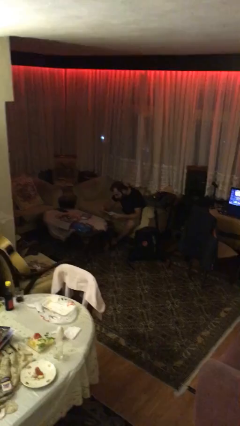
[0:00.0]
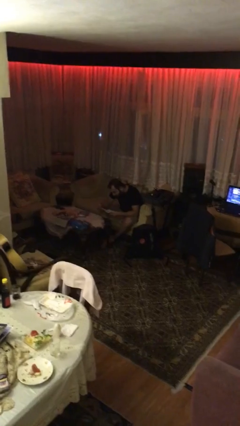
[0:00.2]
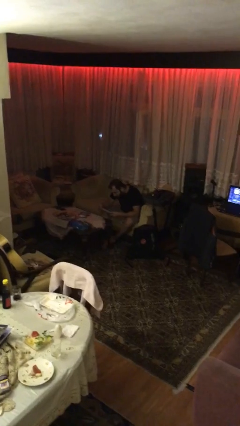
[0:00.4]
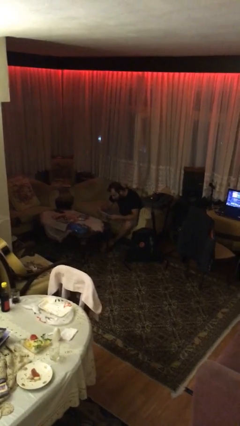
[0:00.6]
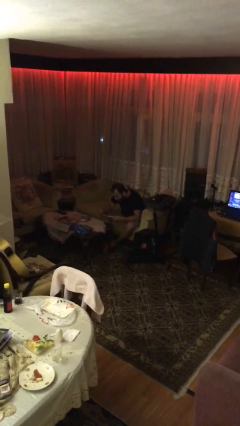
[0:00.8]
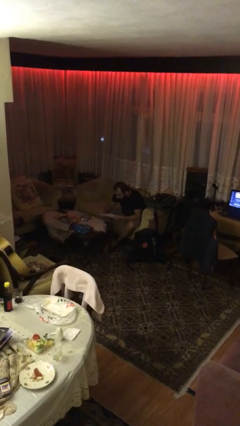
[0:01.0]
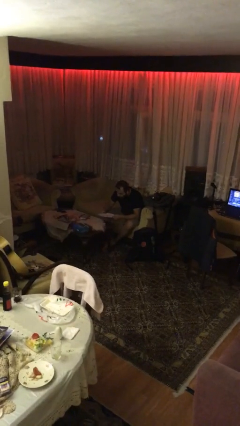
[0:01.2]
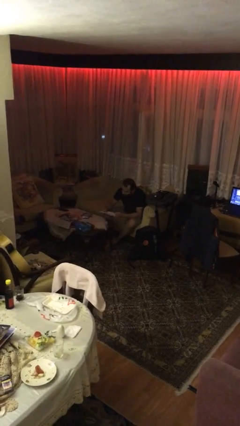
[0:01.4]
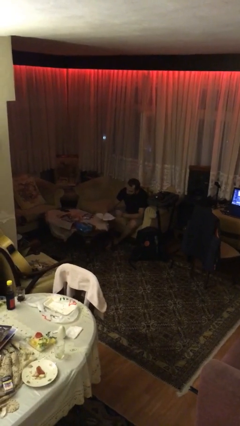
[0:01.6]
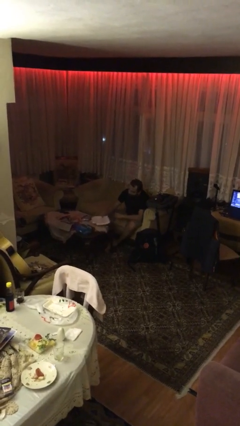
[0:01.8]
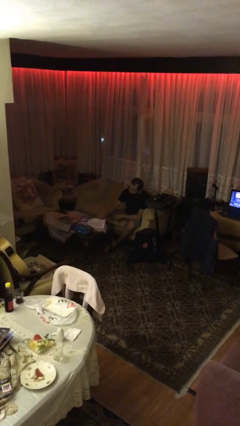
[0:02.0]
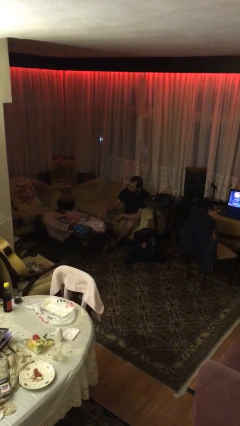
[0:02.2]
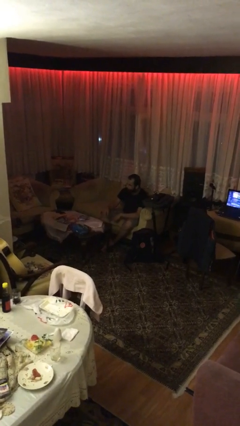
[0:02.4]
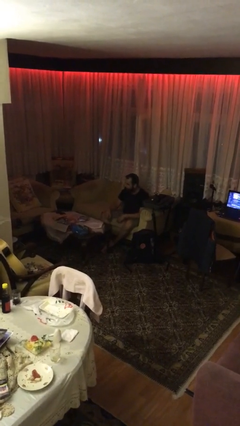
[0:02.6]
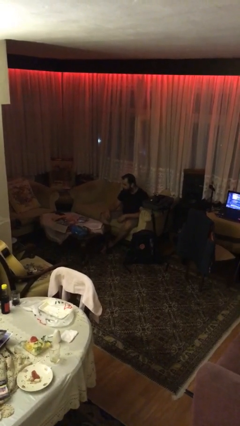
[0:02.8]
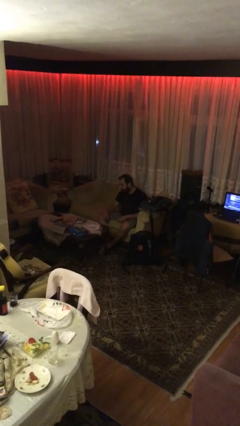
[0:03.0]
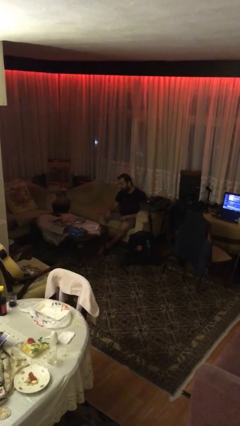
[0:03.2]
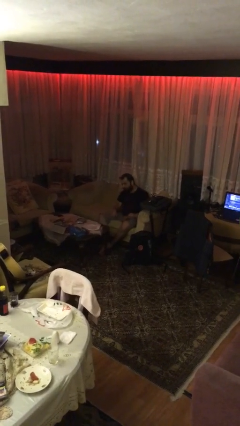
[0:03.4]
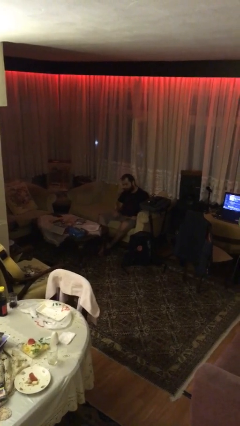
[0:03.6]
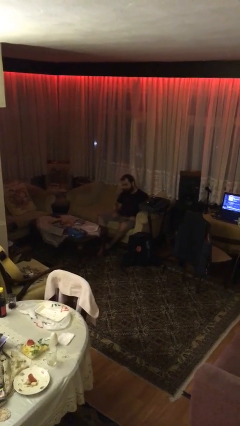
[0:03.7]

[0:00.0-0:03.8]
person puts down object on table

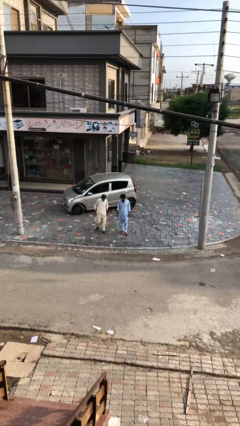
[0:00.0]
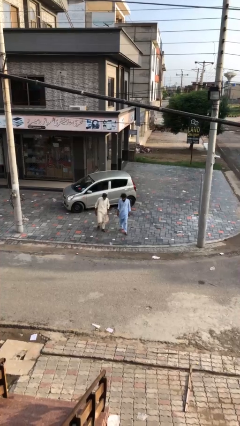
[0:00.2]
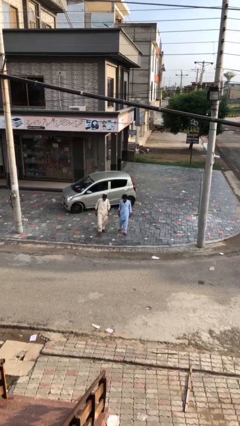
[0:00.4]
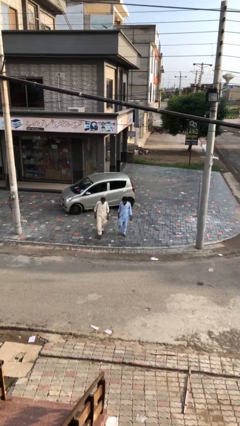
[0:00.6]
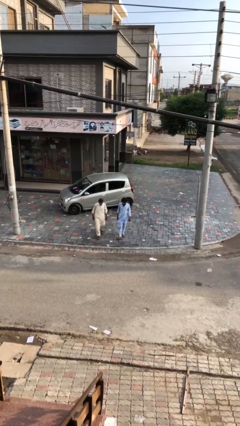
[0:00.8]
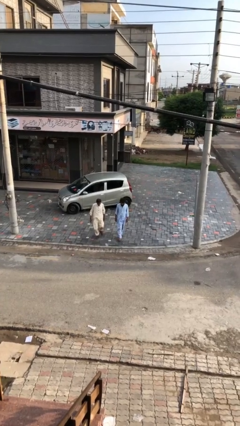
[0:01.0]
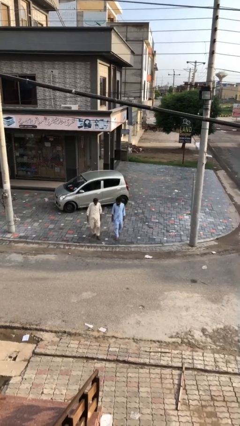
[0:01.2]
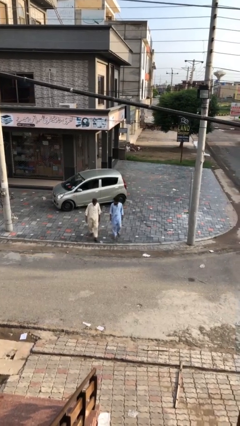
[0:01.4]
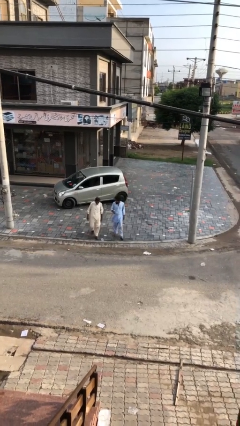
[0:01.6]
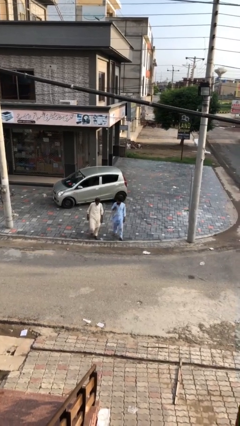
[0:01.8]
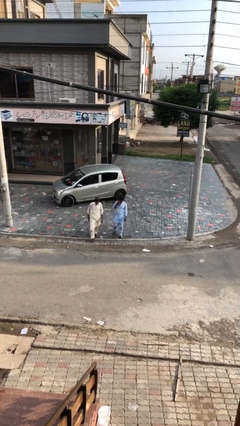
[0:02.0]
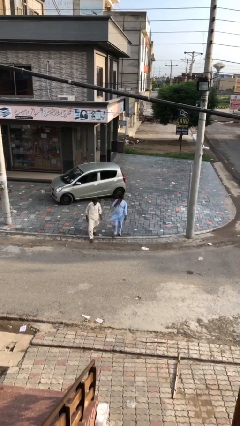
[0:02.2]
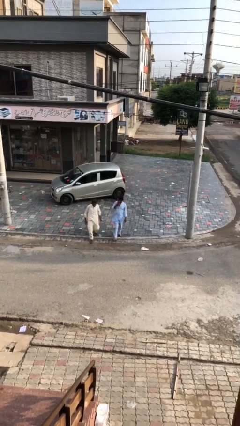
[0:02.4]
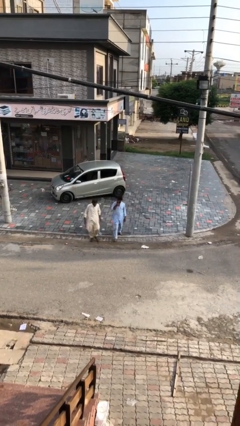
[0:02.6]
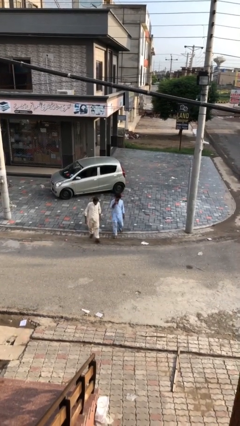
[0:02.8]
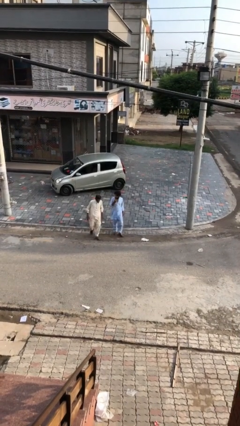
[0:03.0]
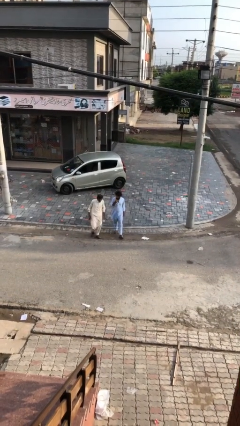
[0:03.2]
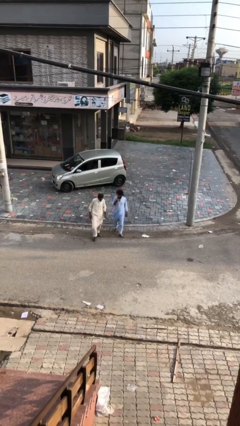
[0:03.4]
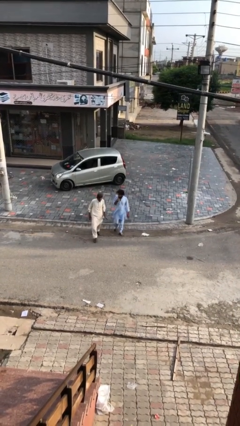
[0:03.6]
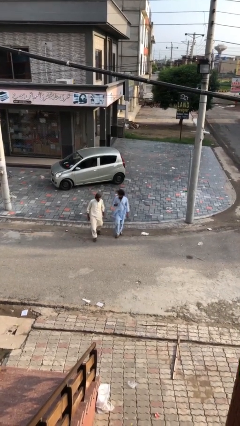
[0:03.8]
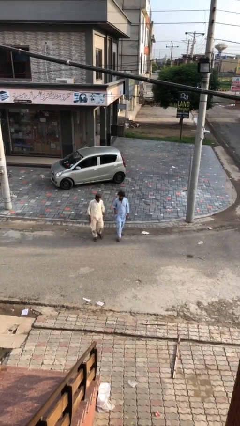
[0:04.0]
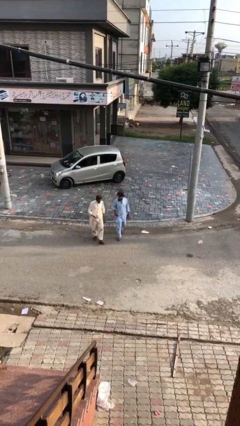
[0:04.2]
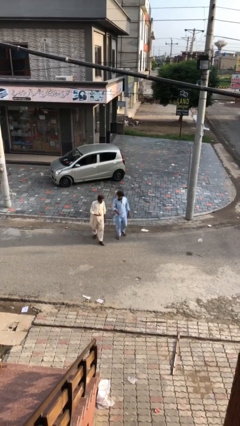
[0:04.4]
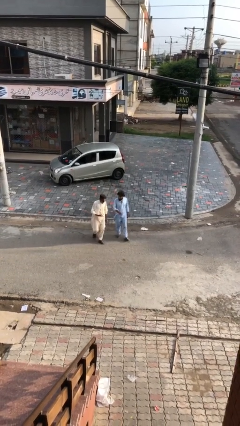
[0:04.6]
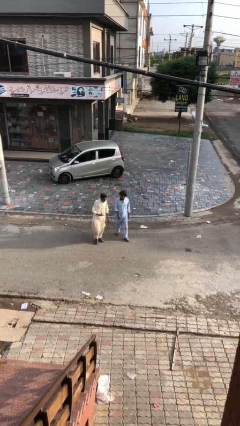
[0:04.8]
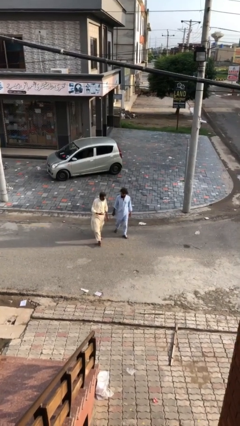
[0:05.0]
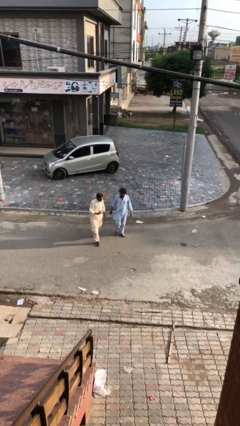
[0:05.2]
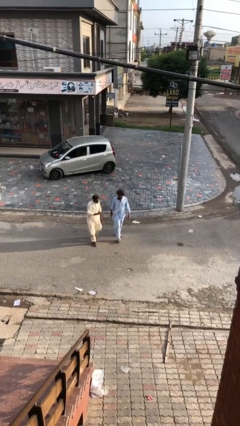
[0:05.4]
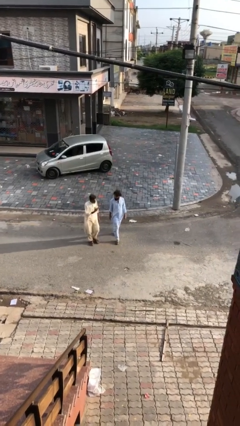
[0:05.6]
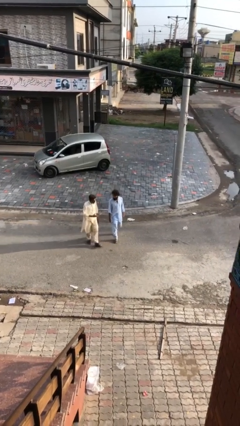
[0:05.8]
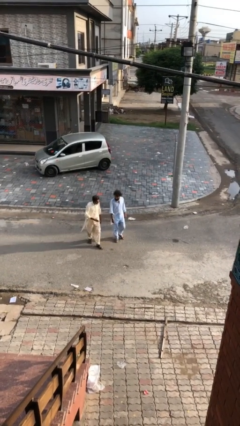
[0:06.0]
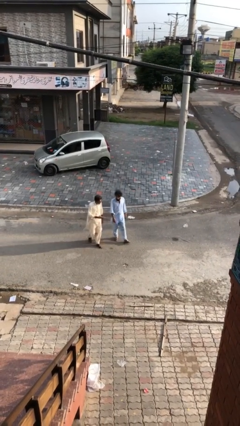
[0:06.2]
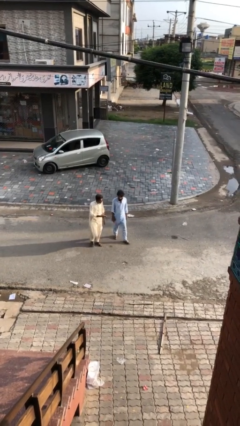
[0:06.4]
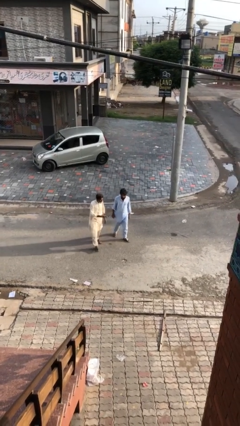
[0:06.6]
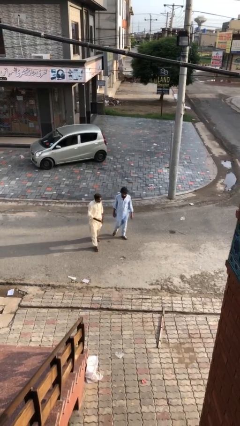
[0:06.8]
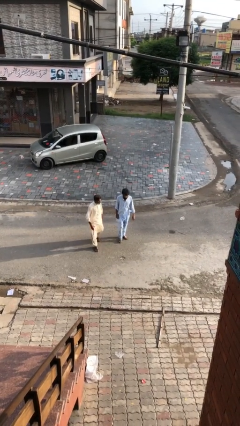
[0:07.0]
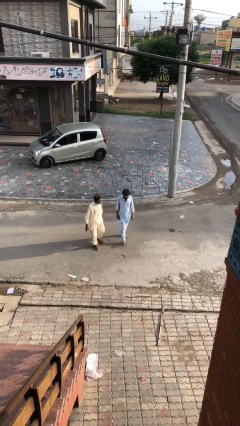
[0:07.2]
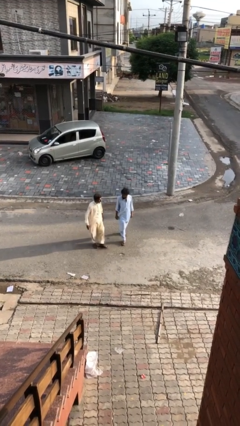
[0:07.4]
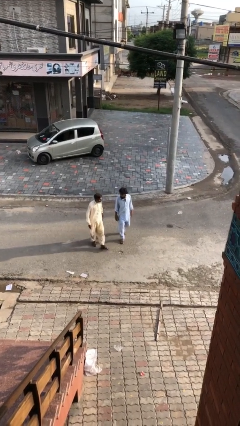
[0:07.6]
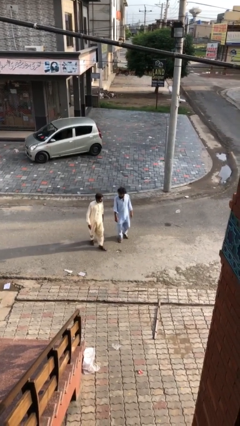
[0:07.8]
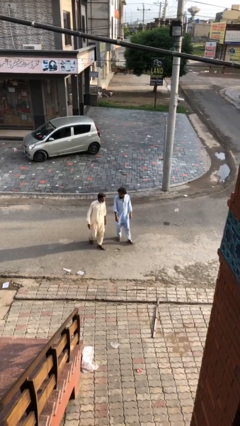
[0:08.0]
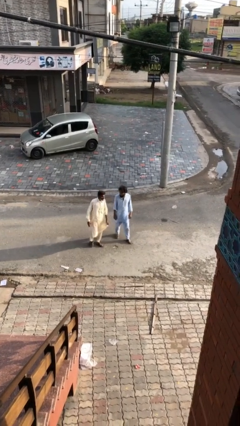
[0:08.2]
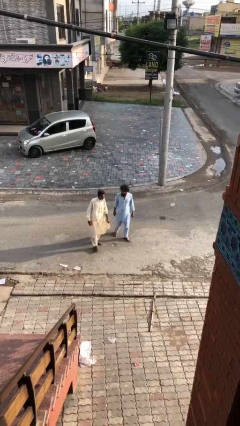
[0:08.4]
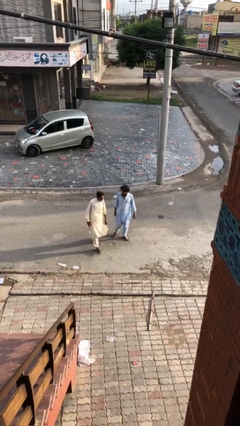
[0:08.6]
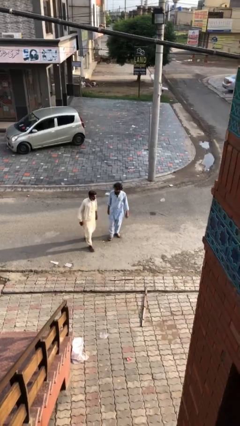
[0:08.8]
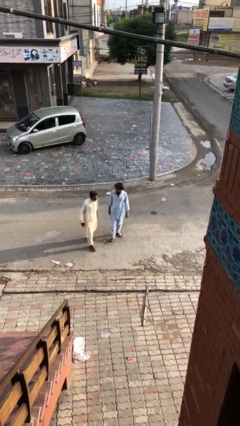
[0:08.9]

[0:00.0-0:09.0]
person talks to person

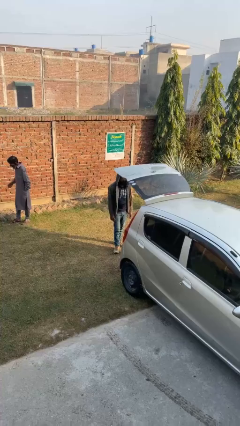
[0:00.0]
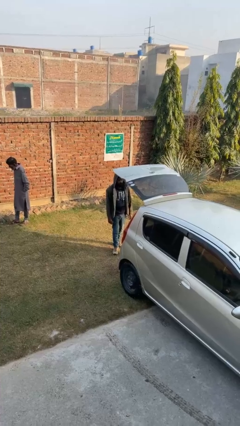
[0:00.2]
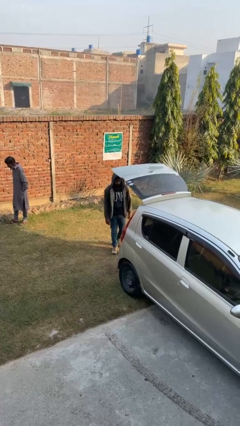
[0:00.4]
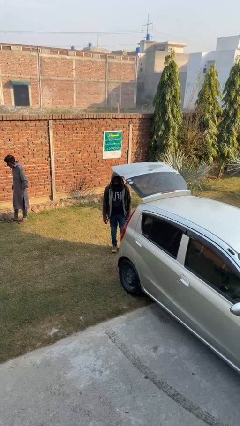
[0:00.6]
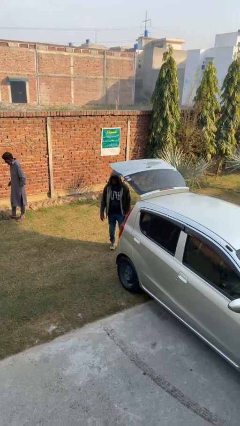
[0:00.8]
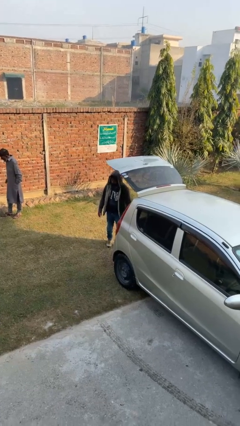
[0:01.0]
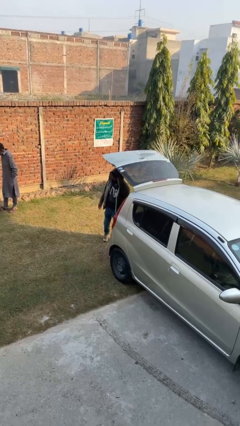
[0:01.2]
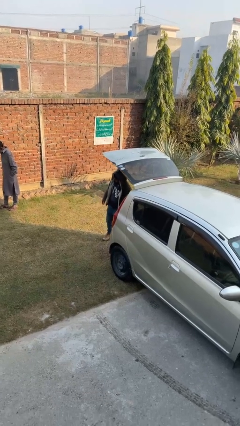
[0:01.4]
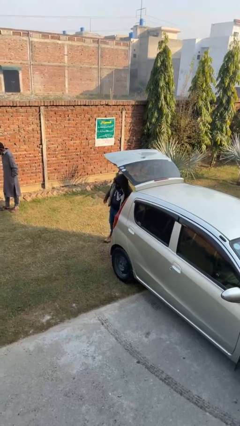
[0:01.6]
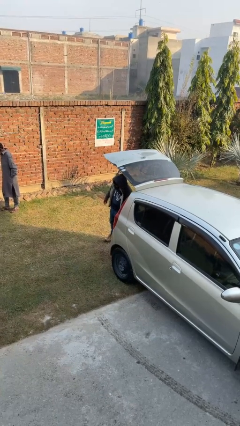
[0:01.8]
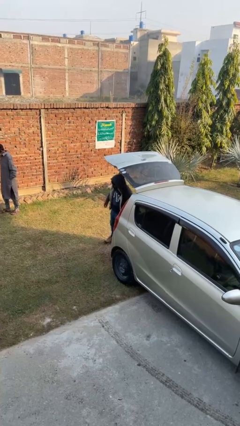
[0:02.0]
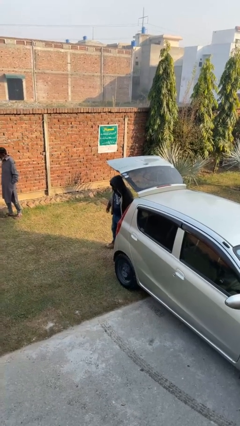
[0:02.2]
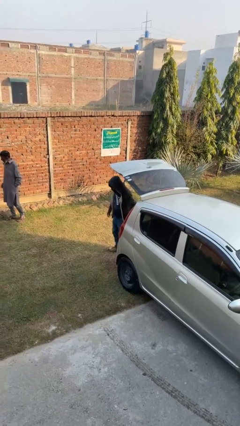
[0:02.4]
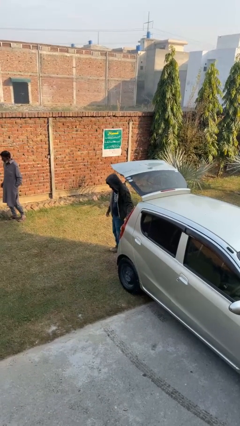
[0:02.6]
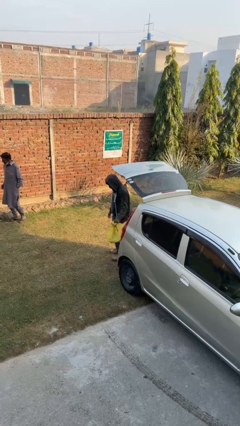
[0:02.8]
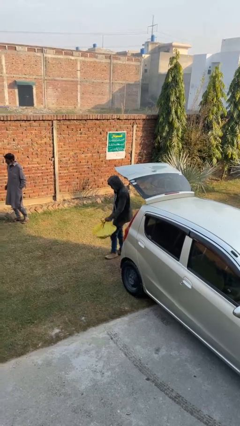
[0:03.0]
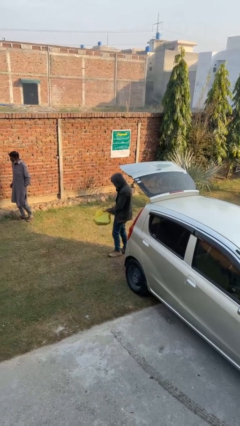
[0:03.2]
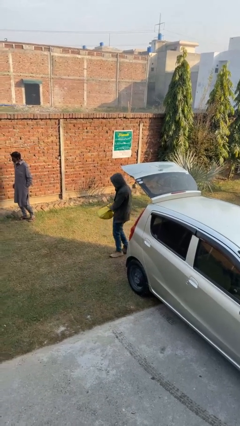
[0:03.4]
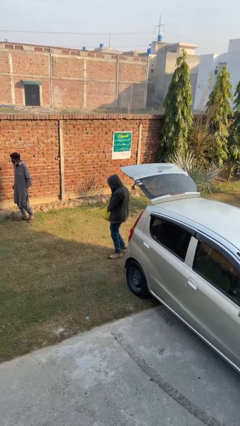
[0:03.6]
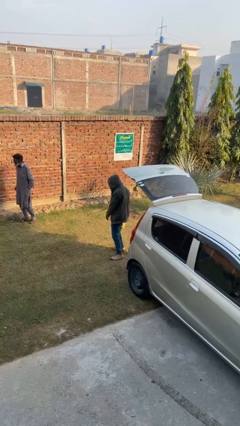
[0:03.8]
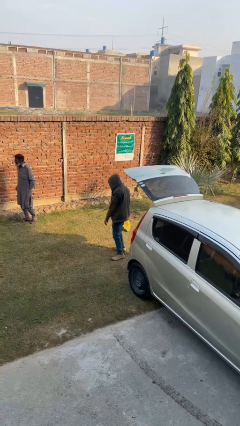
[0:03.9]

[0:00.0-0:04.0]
person unloads car

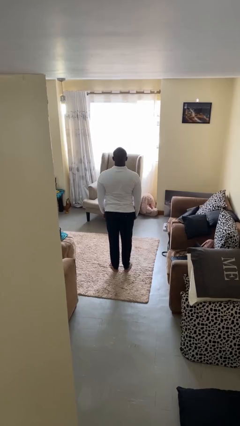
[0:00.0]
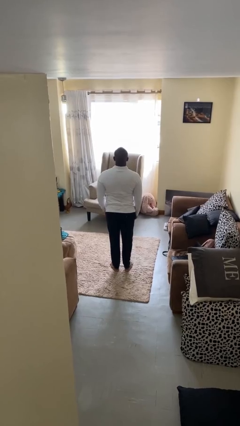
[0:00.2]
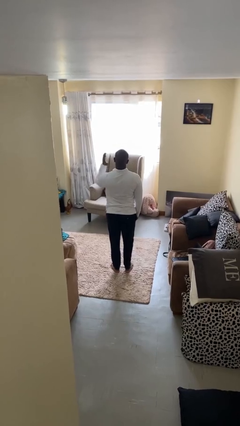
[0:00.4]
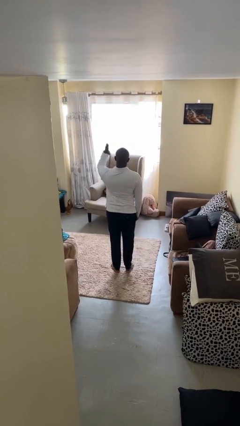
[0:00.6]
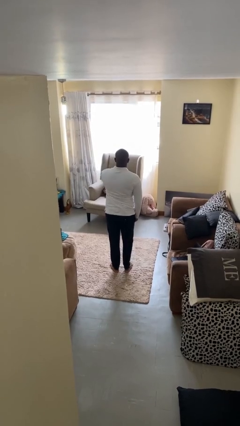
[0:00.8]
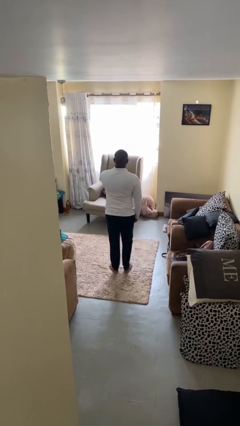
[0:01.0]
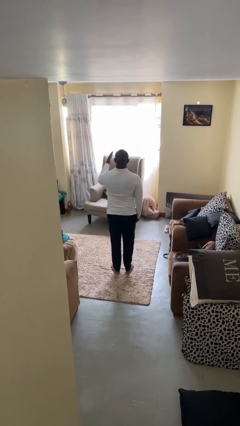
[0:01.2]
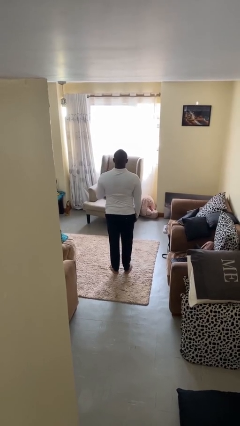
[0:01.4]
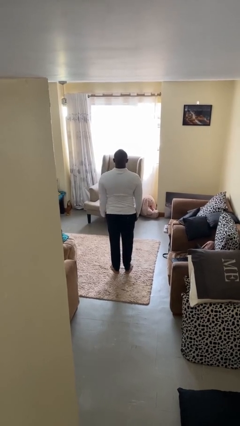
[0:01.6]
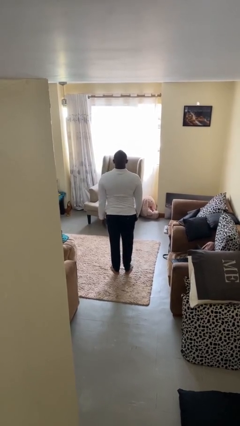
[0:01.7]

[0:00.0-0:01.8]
person karate chop
